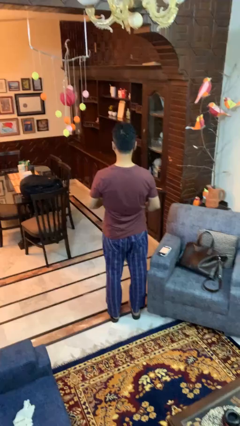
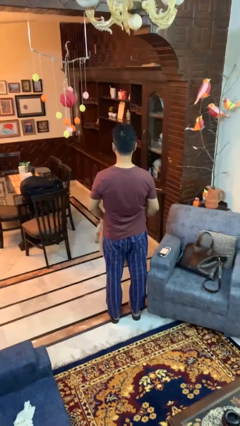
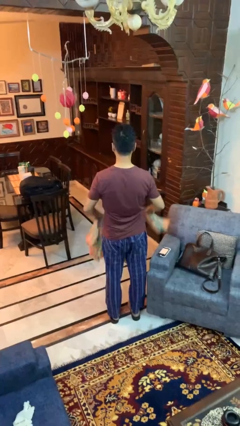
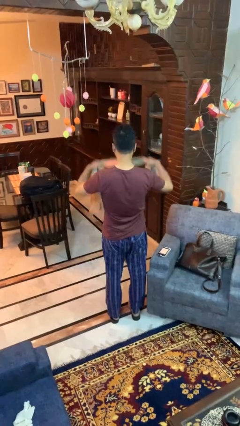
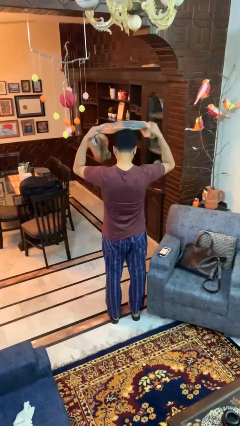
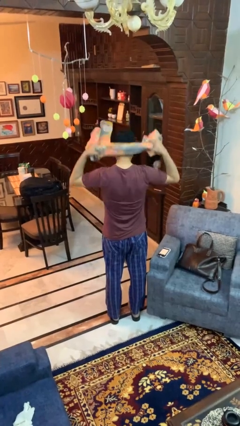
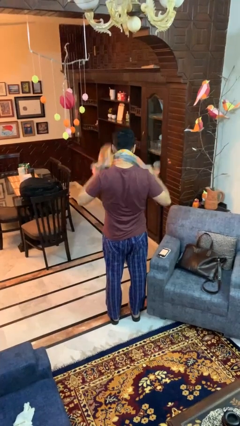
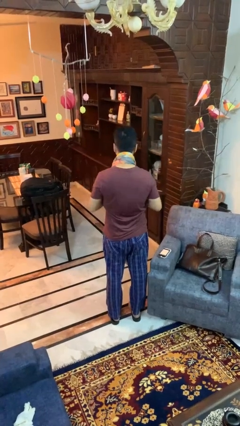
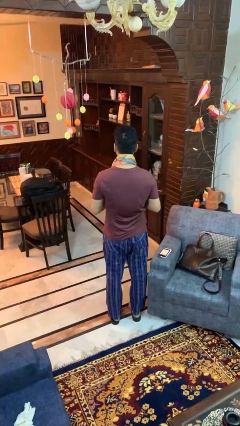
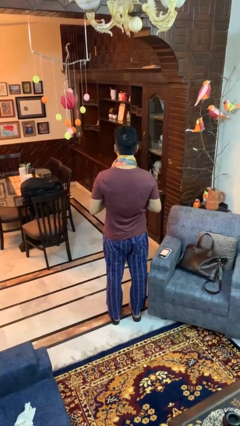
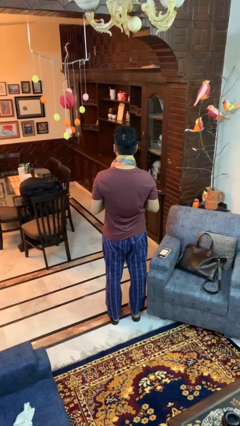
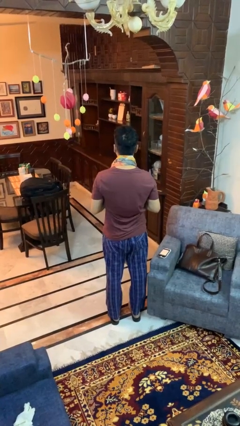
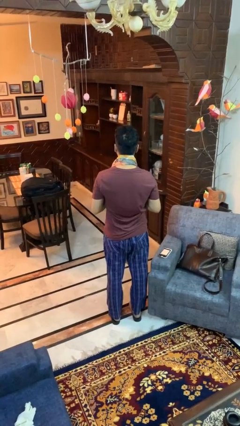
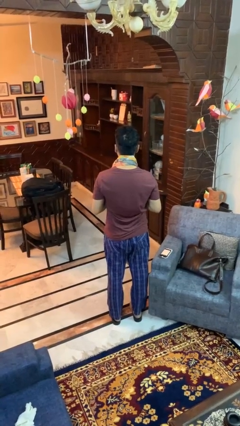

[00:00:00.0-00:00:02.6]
person puts on scarf

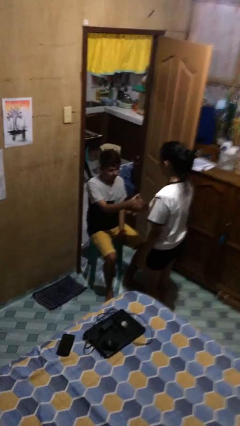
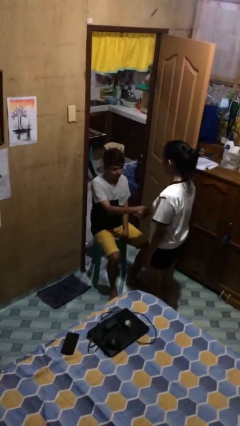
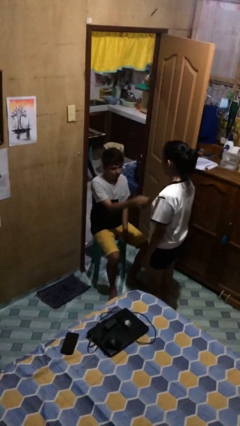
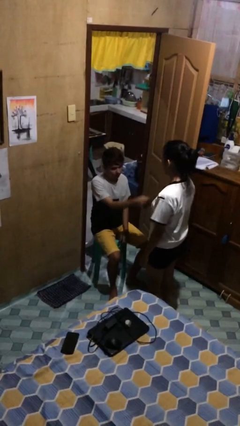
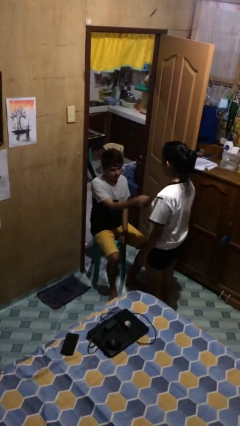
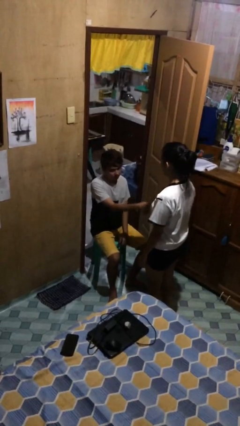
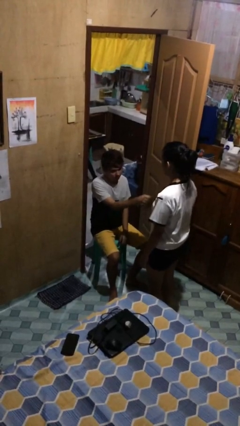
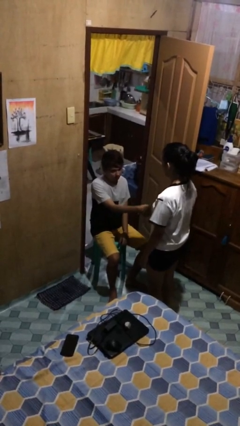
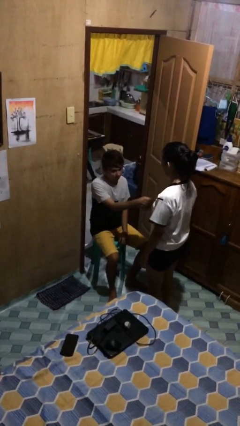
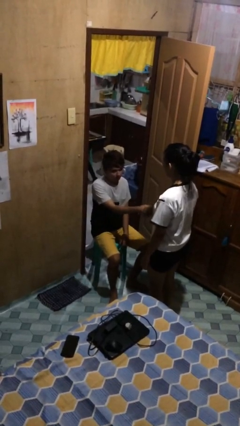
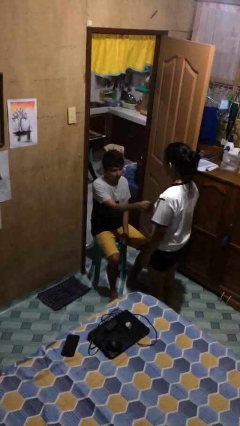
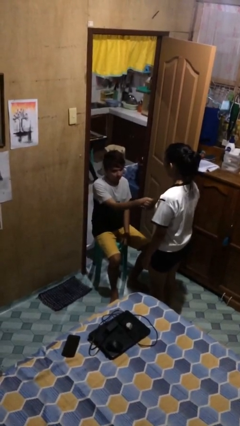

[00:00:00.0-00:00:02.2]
person shakes hand

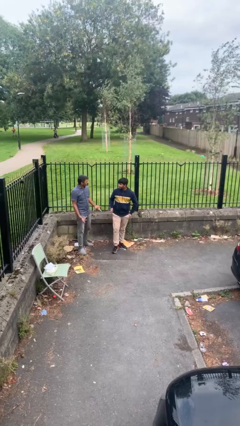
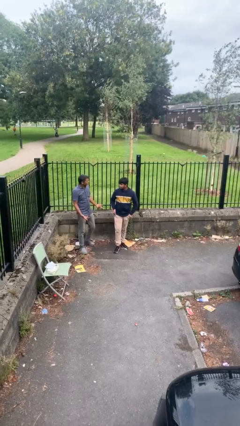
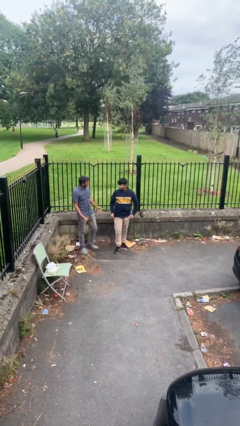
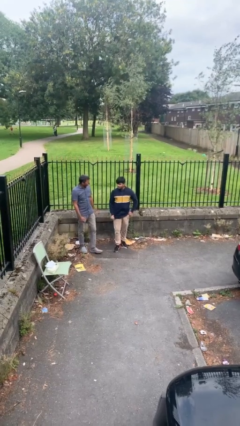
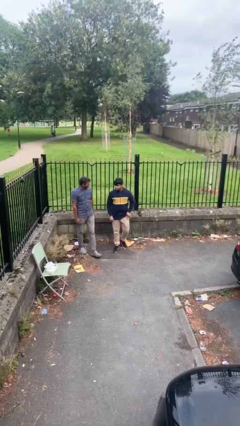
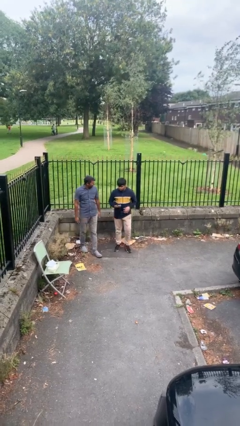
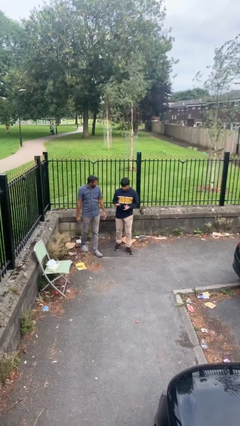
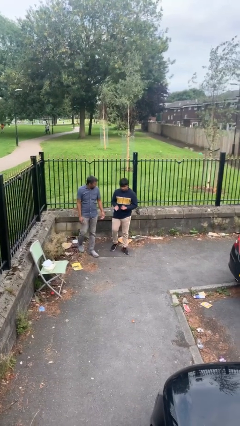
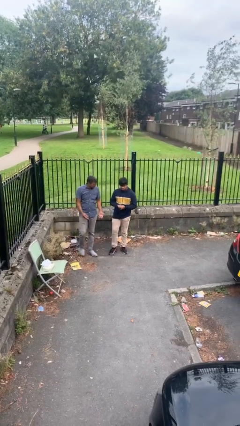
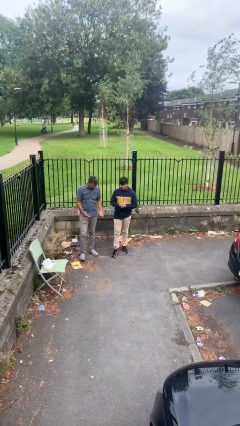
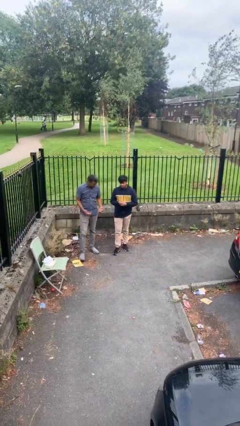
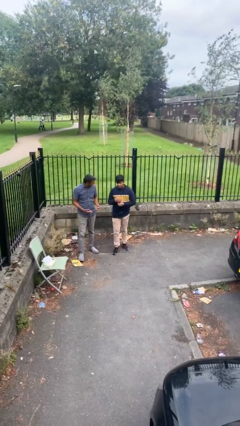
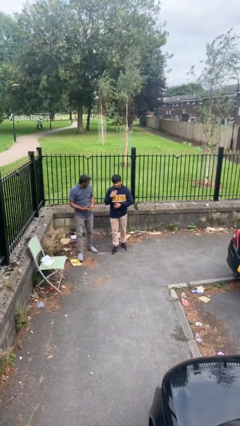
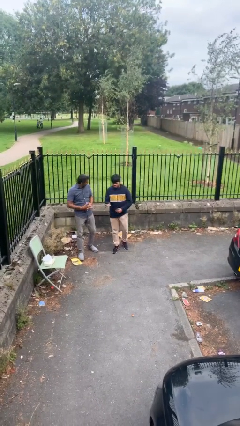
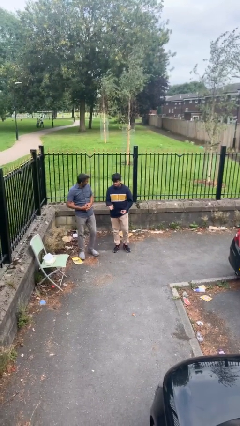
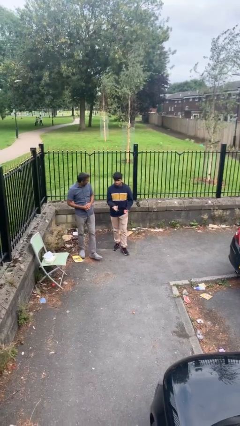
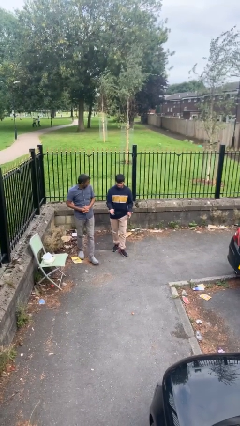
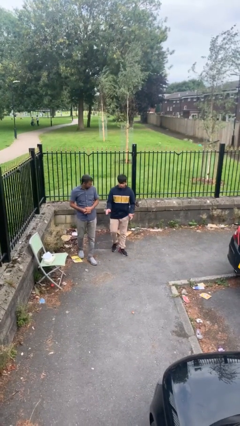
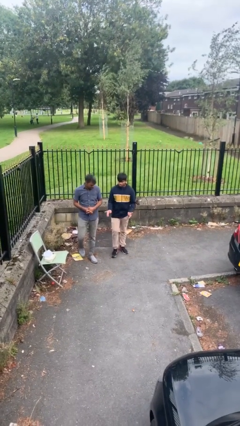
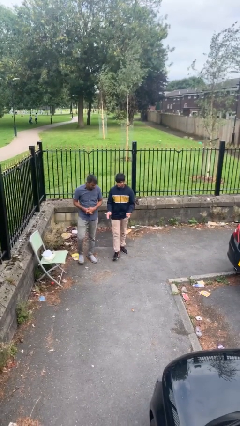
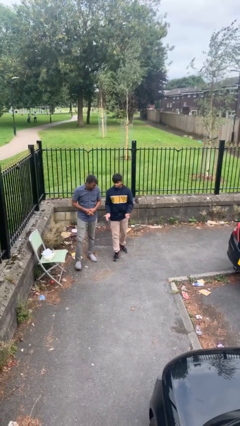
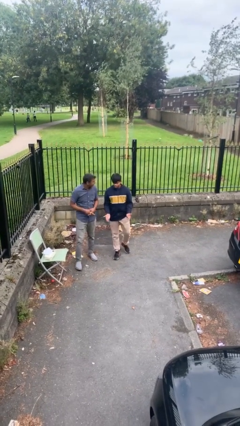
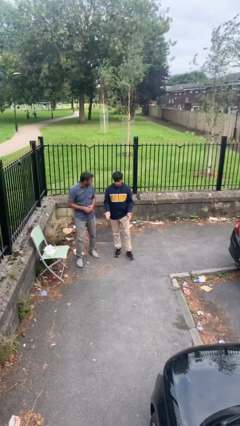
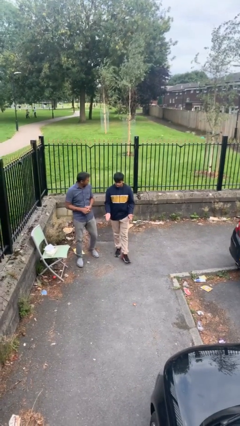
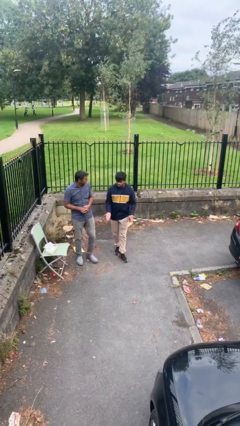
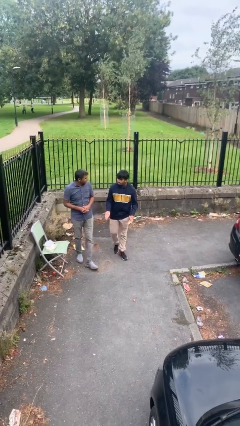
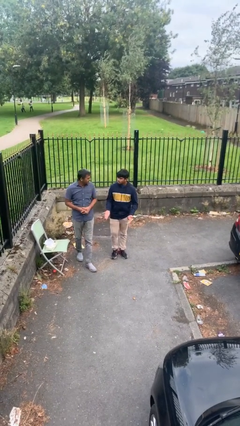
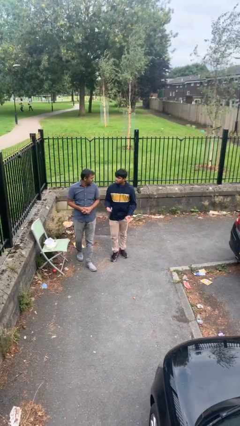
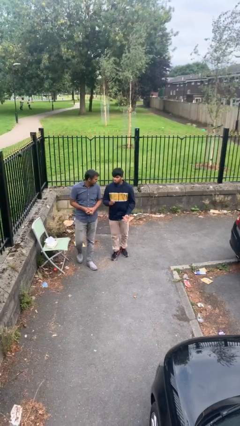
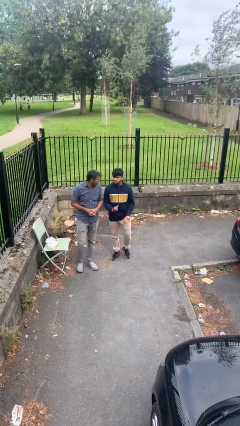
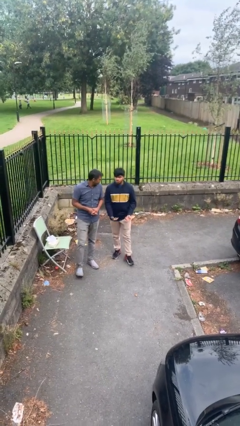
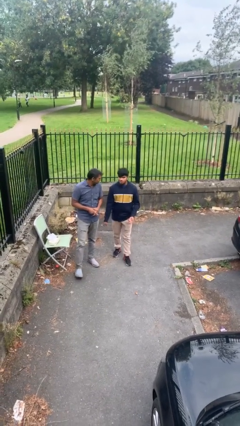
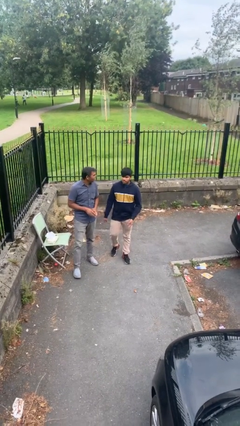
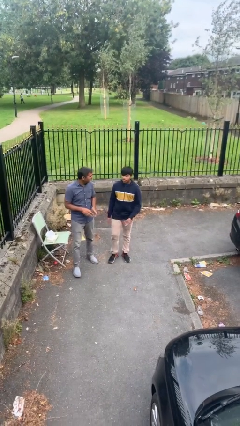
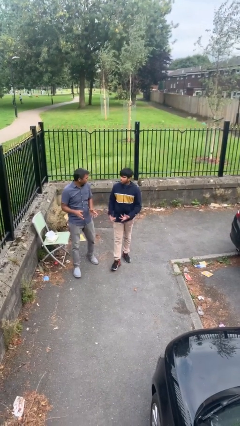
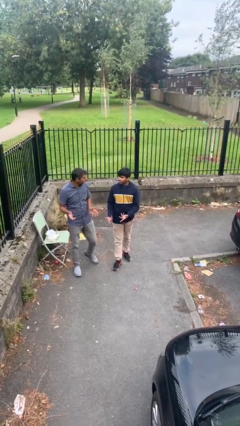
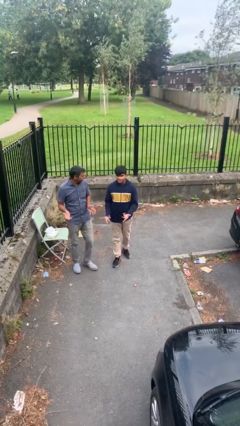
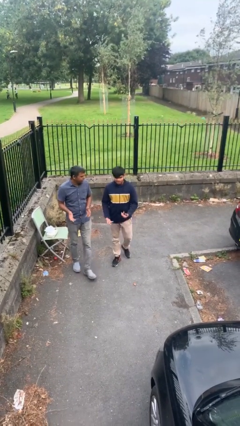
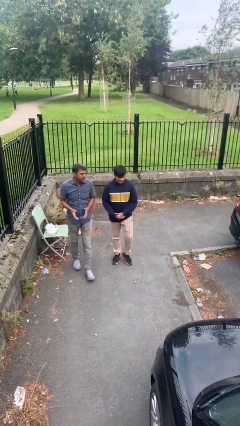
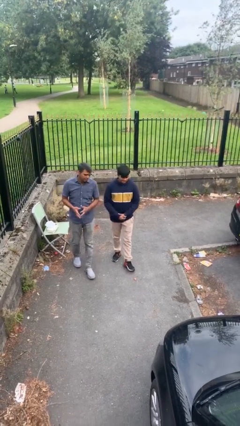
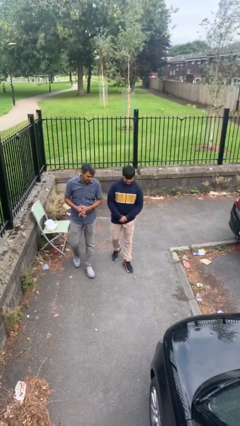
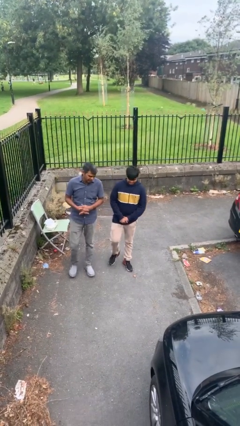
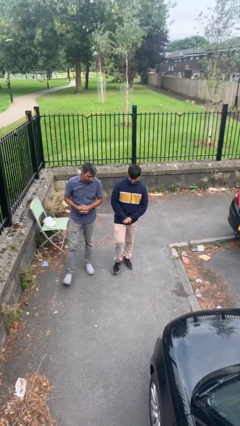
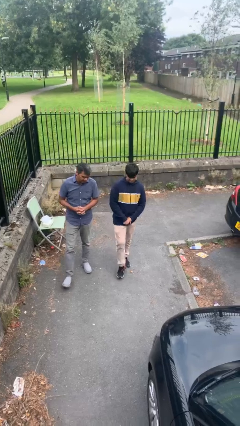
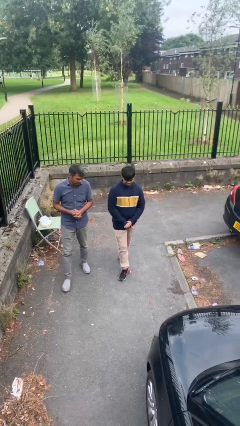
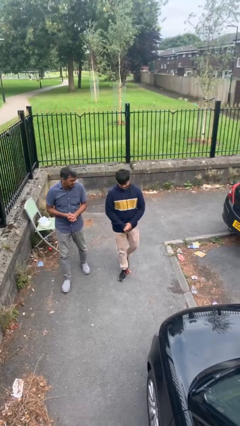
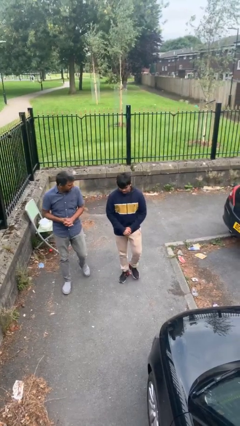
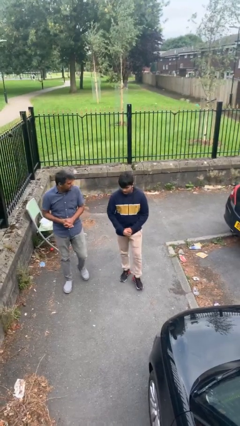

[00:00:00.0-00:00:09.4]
person talks to person

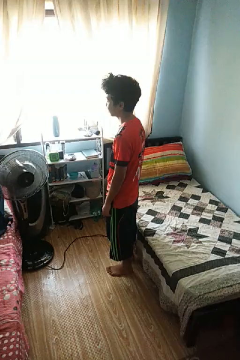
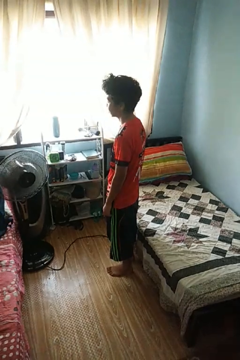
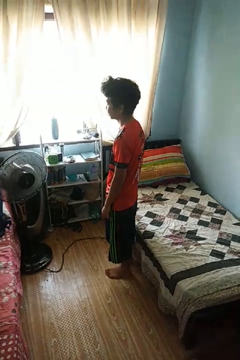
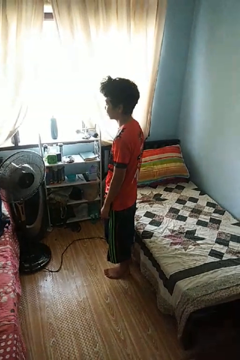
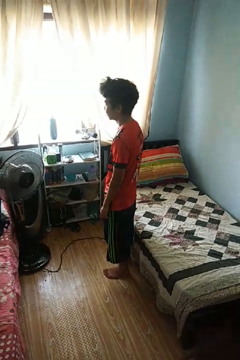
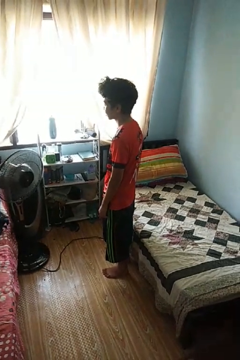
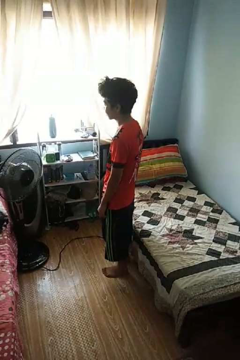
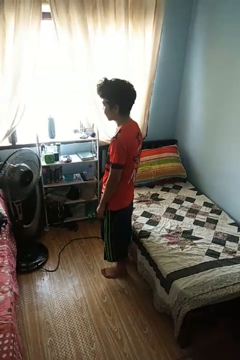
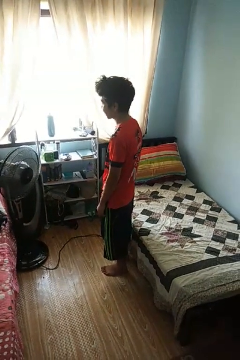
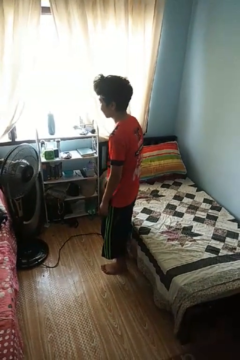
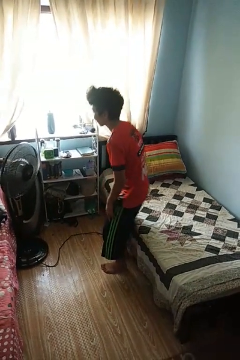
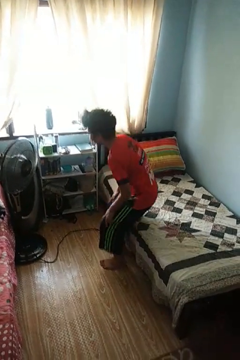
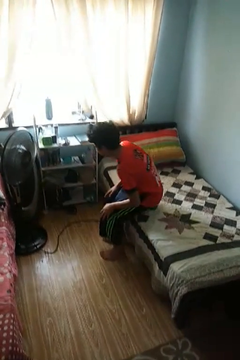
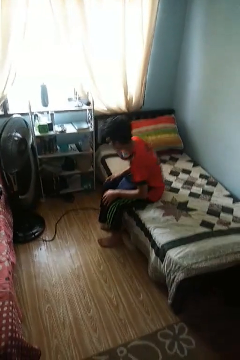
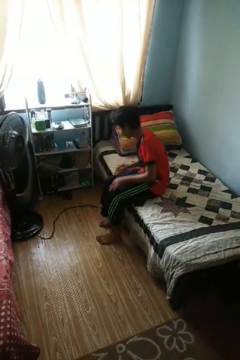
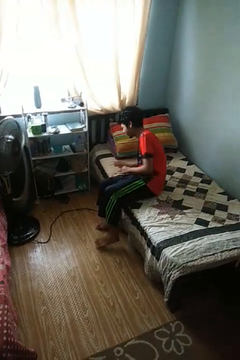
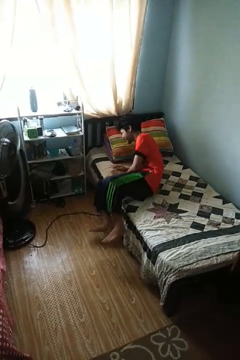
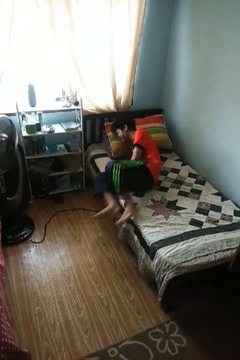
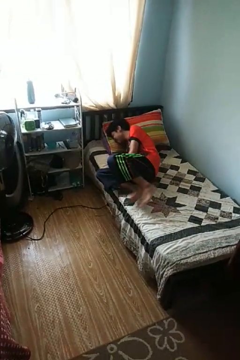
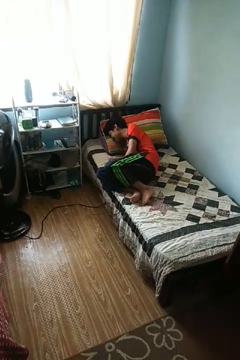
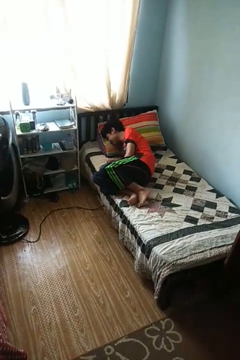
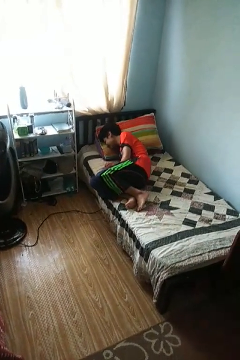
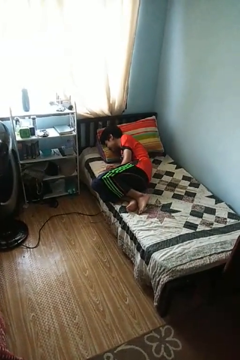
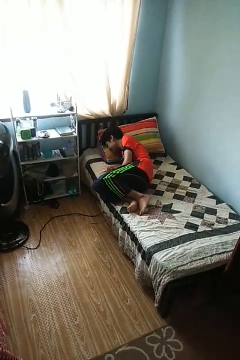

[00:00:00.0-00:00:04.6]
person lies down on bed
